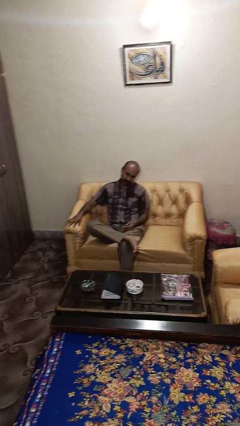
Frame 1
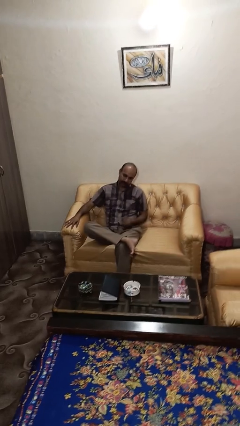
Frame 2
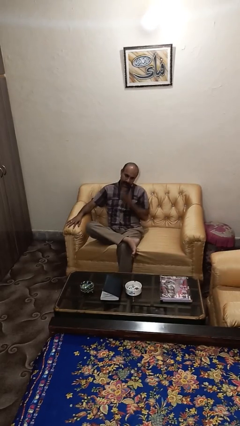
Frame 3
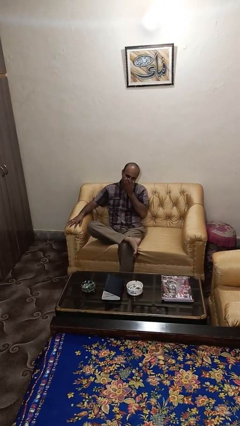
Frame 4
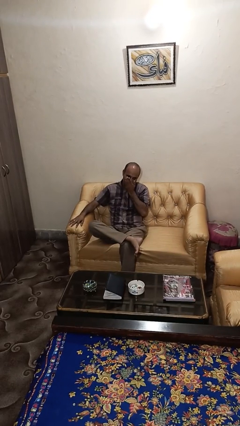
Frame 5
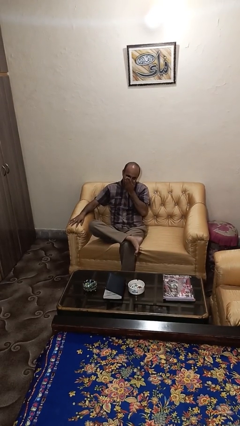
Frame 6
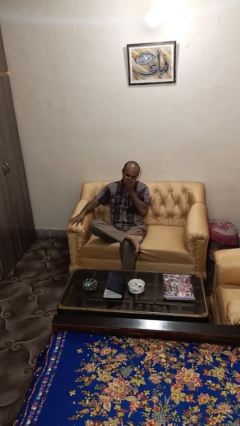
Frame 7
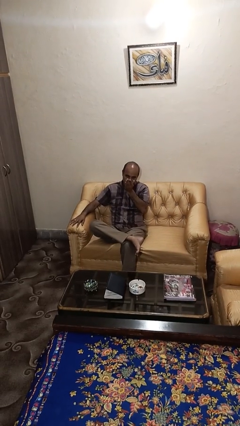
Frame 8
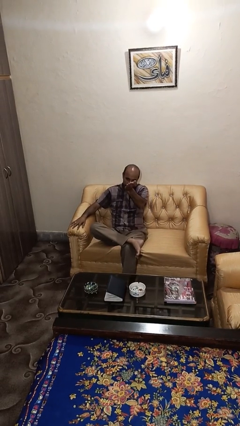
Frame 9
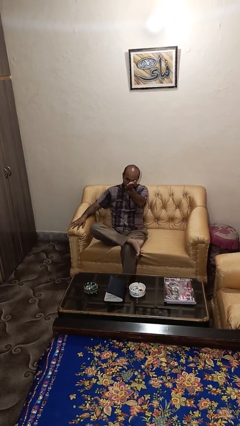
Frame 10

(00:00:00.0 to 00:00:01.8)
person gestures blow kiss

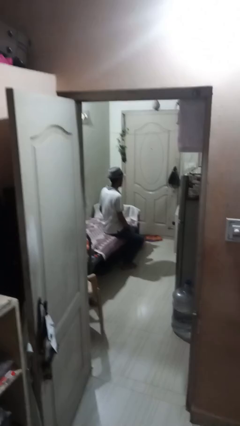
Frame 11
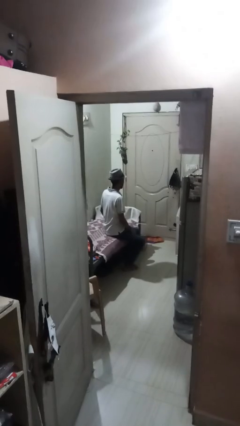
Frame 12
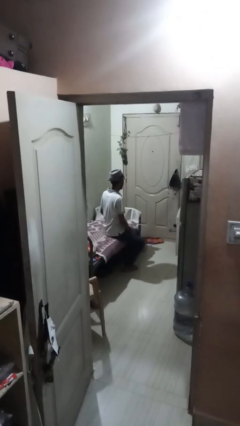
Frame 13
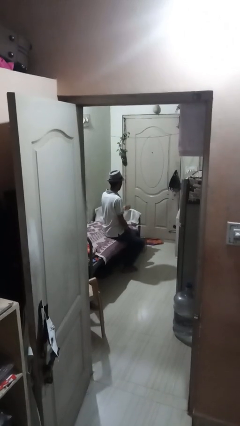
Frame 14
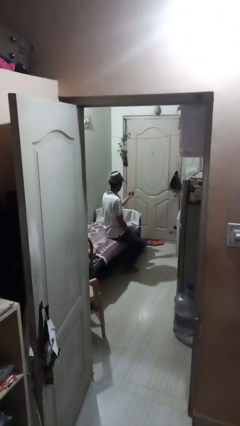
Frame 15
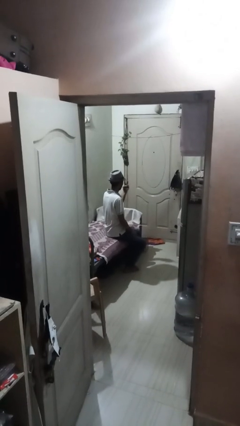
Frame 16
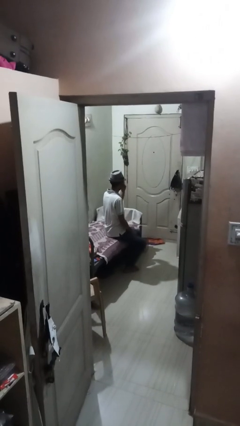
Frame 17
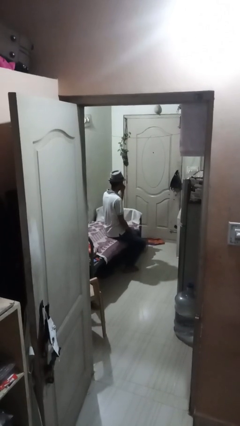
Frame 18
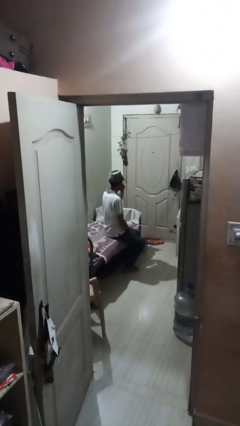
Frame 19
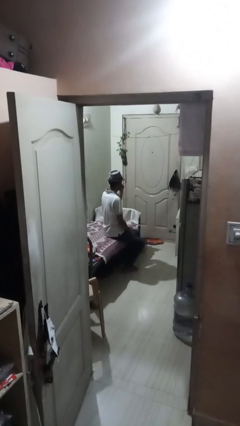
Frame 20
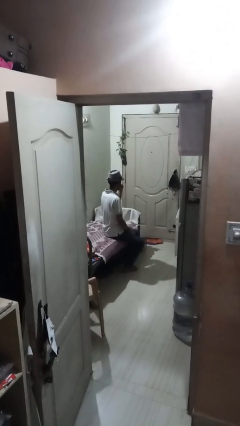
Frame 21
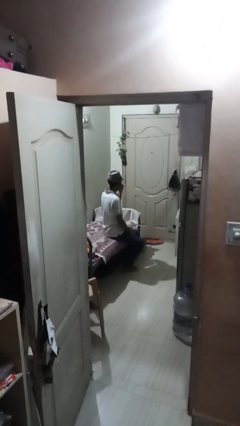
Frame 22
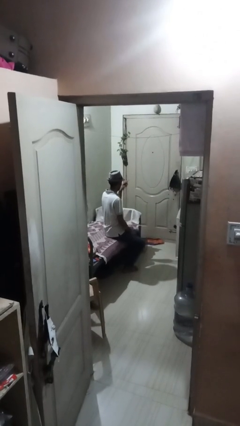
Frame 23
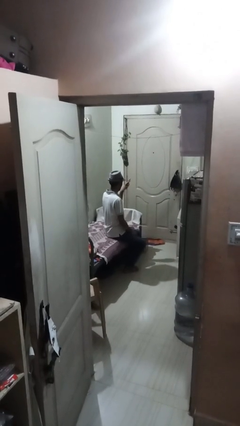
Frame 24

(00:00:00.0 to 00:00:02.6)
person gestures watch closely

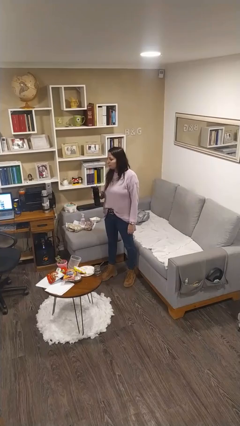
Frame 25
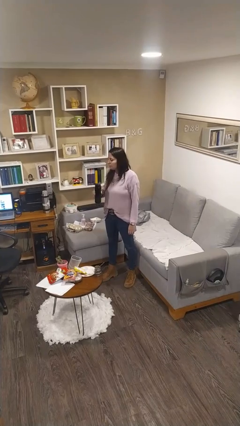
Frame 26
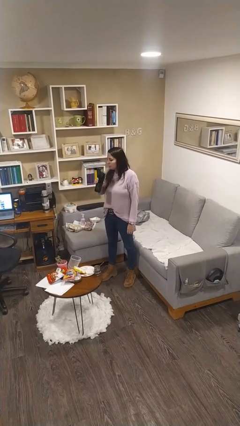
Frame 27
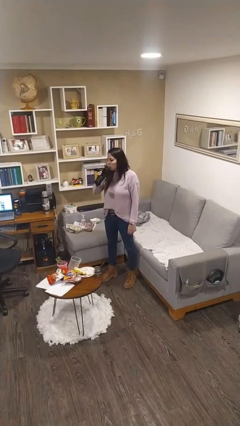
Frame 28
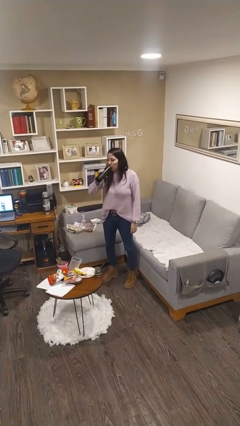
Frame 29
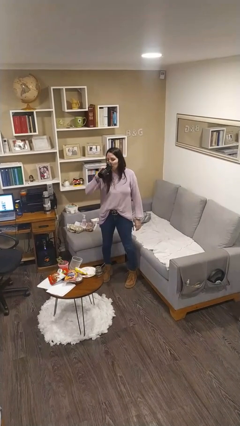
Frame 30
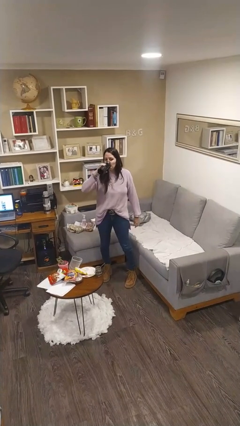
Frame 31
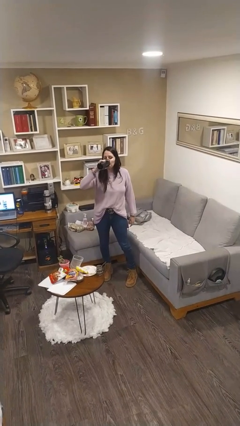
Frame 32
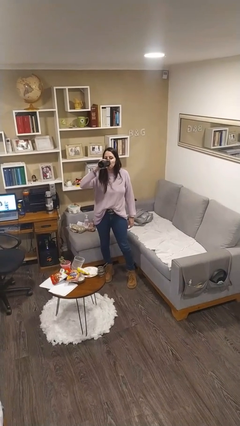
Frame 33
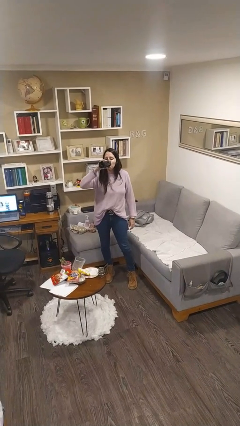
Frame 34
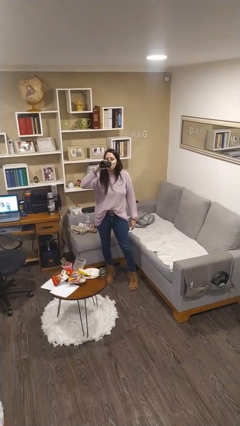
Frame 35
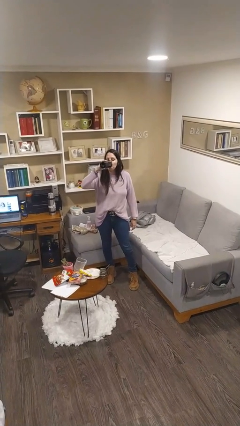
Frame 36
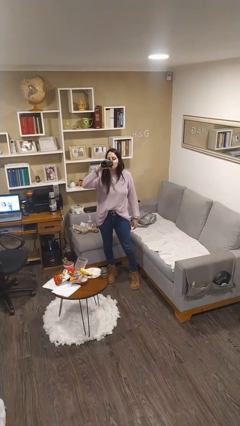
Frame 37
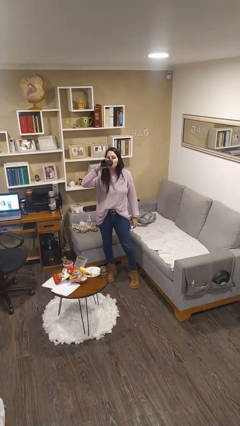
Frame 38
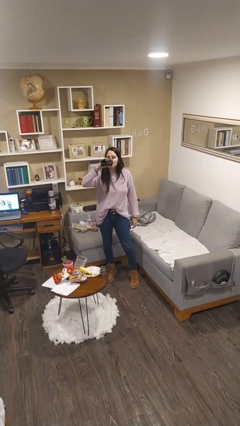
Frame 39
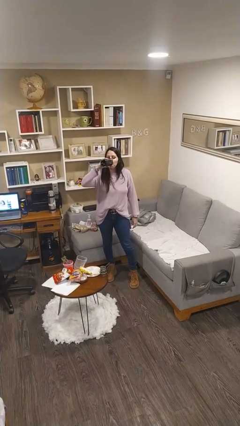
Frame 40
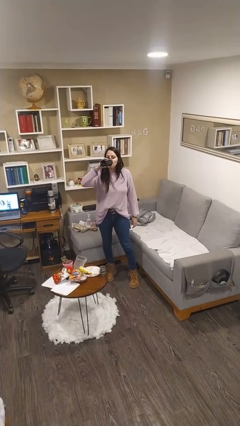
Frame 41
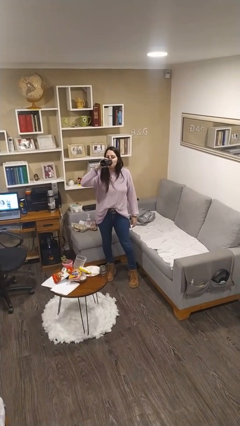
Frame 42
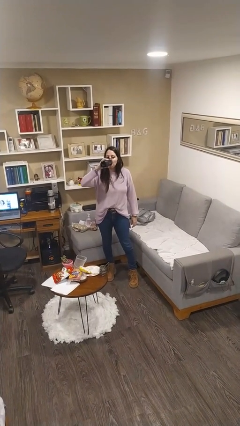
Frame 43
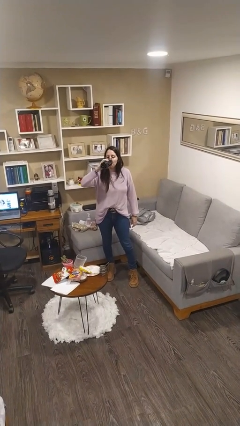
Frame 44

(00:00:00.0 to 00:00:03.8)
person drinks from bottle

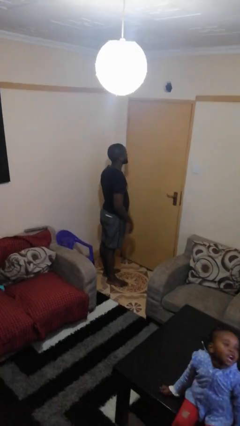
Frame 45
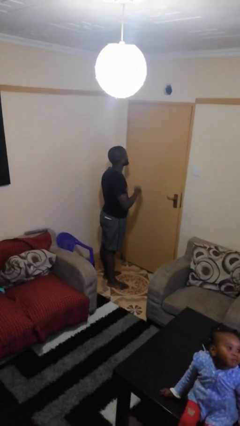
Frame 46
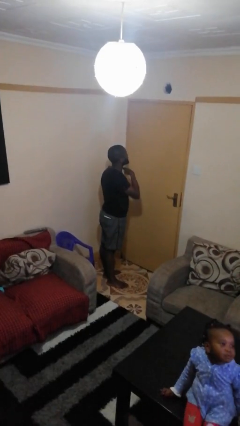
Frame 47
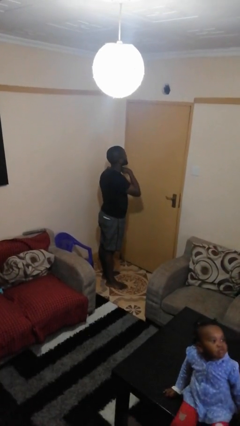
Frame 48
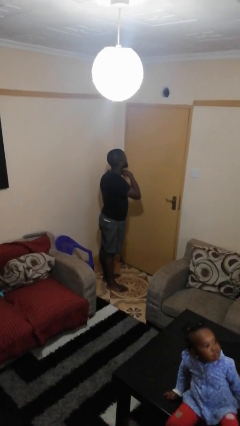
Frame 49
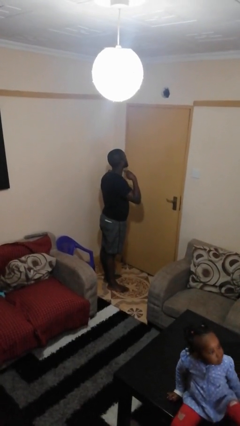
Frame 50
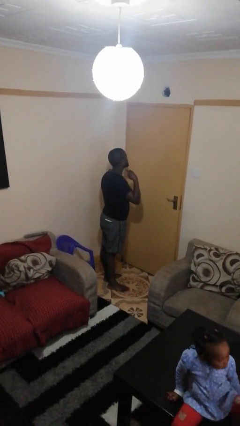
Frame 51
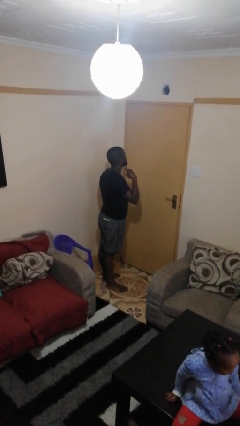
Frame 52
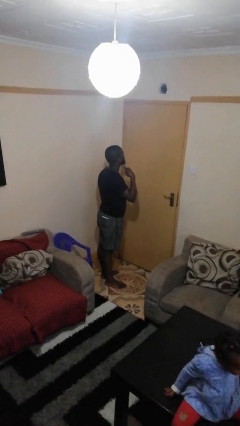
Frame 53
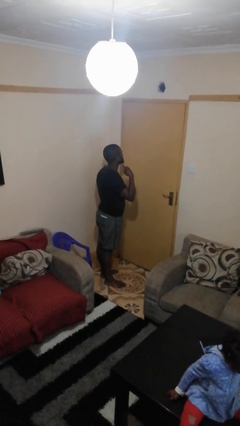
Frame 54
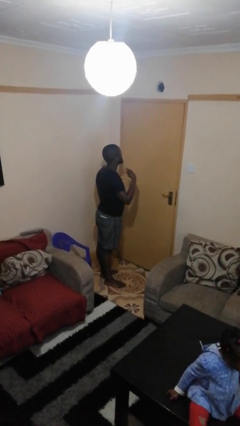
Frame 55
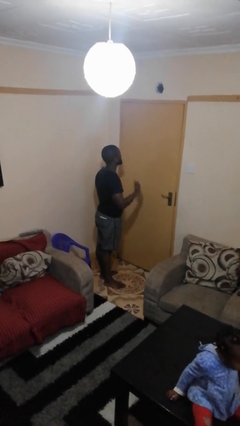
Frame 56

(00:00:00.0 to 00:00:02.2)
person gestures cut

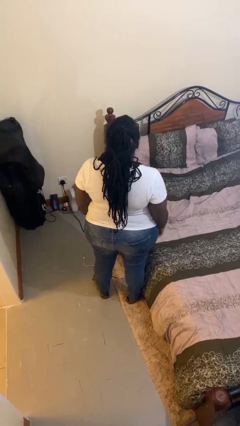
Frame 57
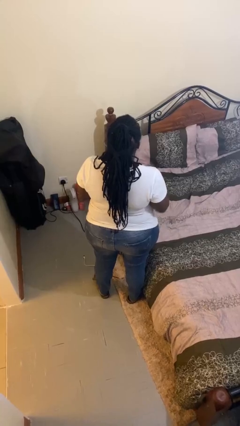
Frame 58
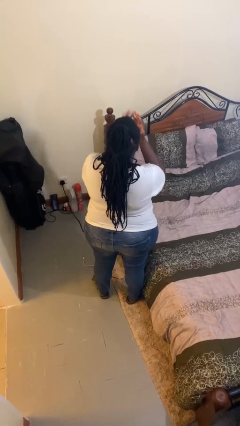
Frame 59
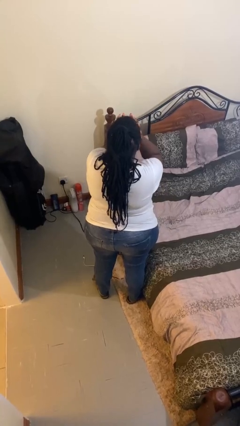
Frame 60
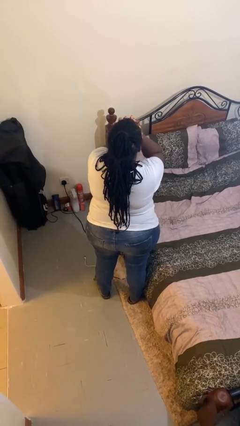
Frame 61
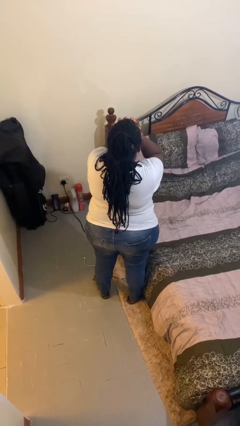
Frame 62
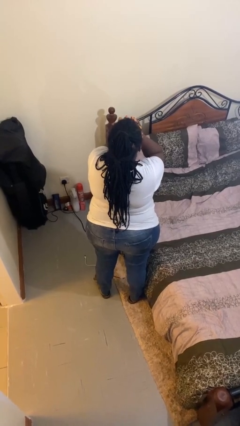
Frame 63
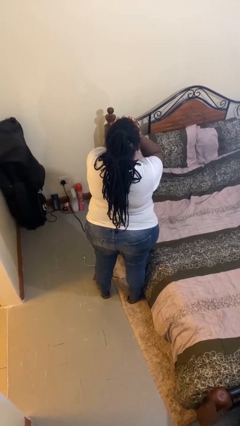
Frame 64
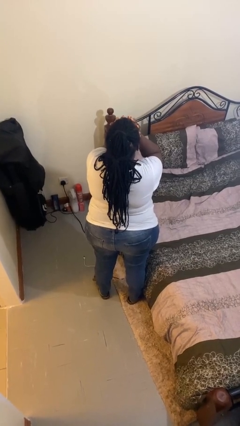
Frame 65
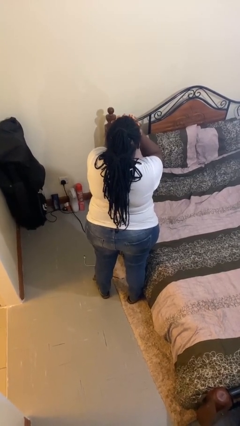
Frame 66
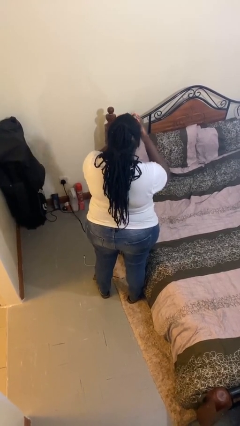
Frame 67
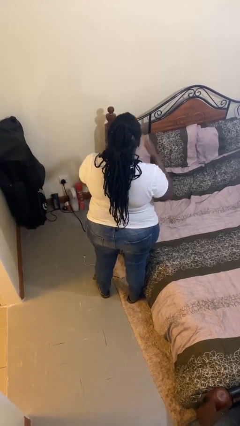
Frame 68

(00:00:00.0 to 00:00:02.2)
person covers face with hands

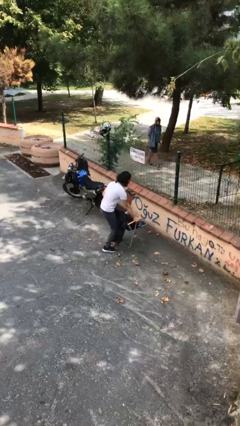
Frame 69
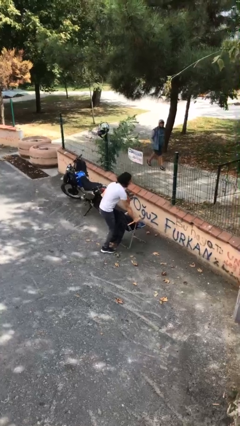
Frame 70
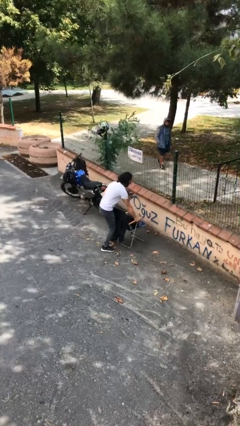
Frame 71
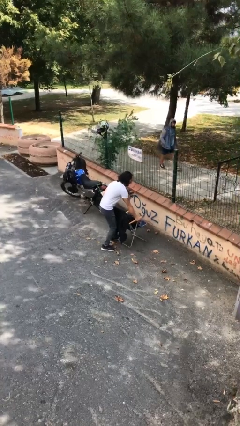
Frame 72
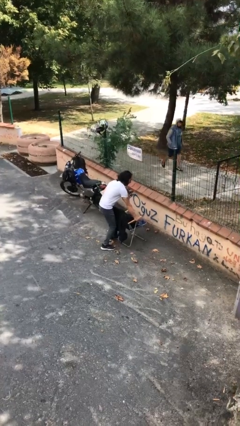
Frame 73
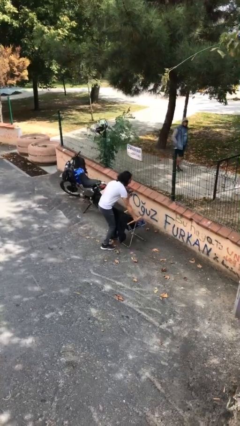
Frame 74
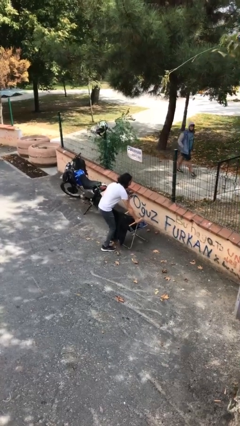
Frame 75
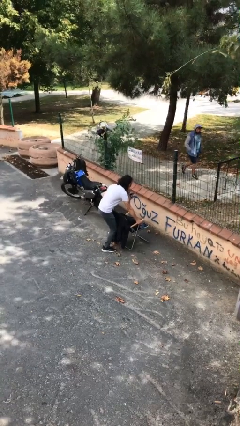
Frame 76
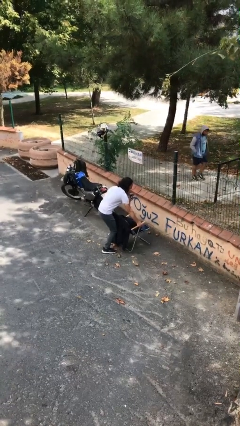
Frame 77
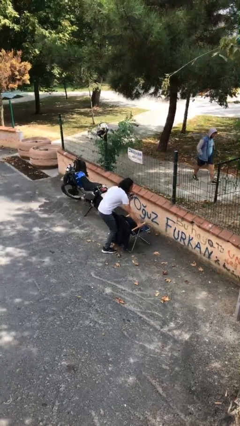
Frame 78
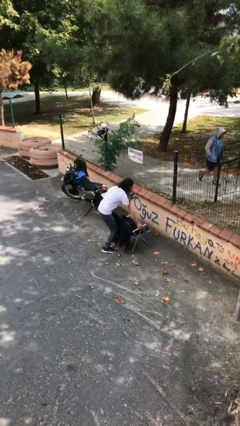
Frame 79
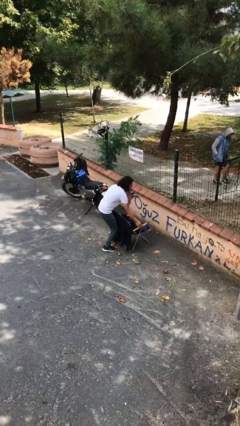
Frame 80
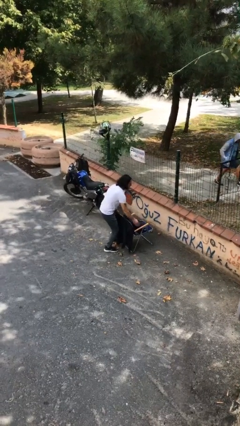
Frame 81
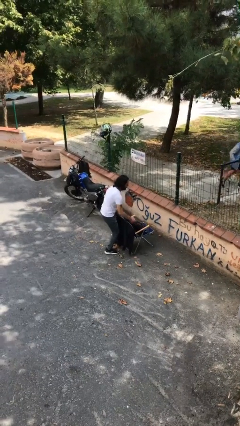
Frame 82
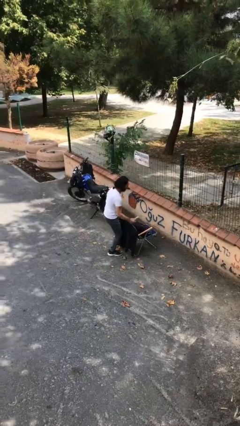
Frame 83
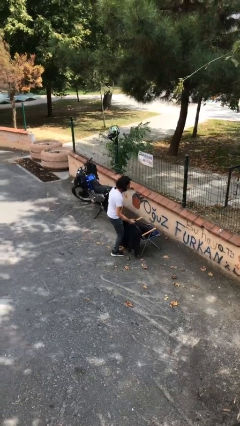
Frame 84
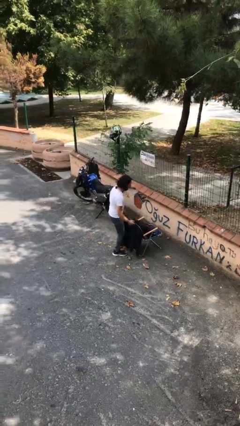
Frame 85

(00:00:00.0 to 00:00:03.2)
person puts down object on floor

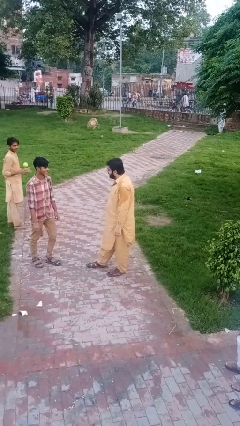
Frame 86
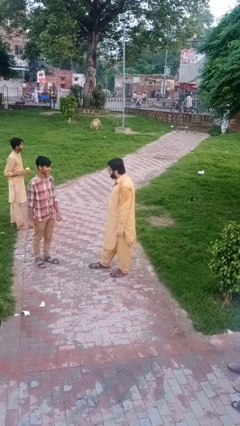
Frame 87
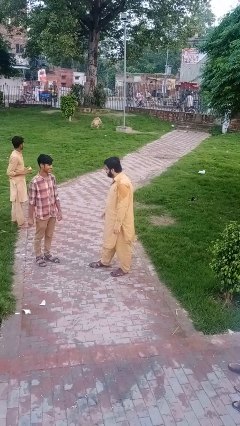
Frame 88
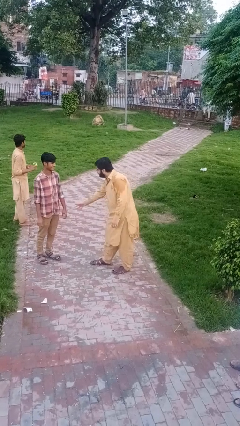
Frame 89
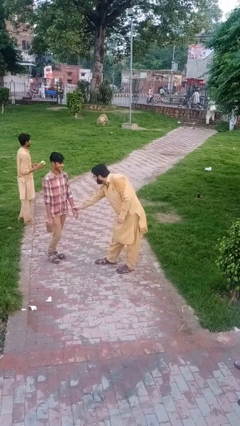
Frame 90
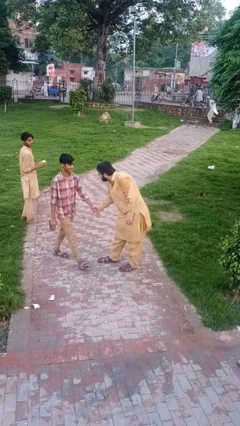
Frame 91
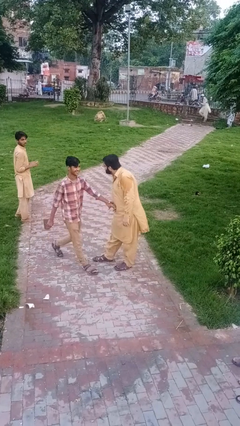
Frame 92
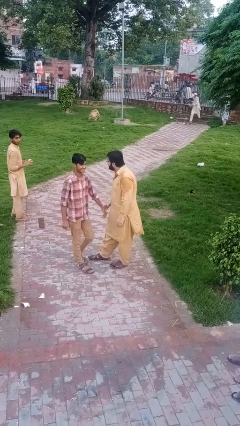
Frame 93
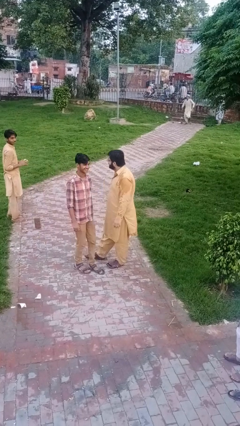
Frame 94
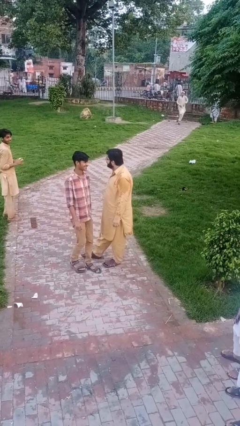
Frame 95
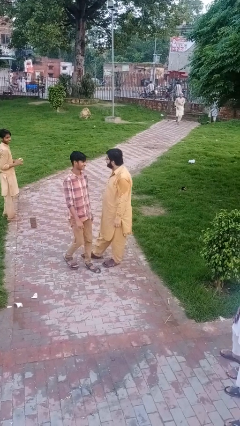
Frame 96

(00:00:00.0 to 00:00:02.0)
person grabs person by forearm
